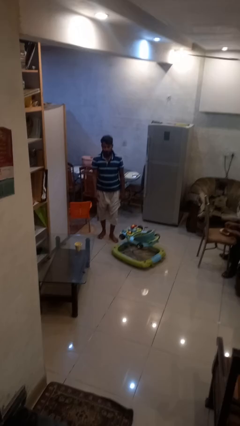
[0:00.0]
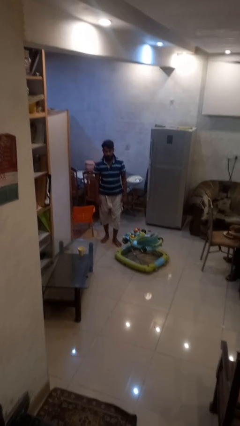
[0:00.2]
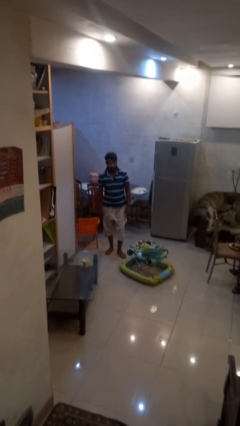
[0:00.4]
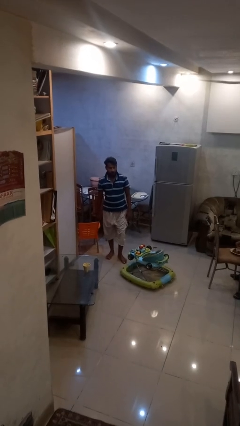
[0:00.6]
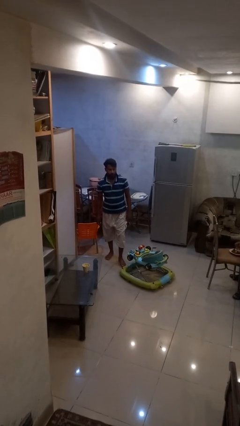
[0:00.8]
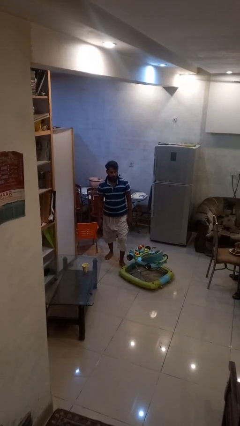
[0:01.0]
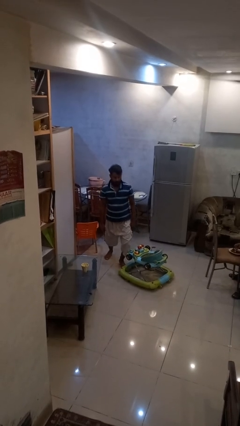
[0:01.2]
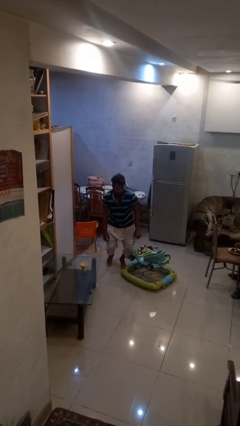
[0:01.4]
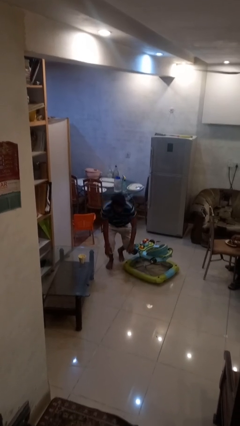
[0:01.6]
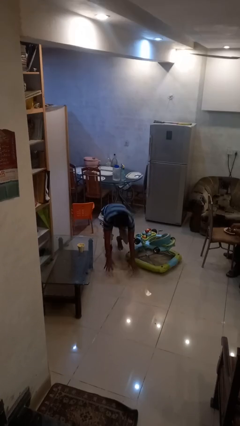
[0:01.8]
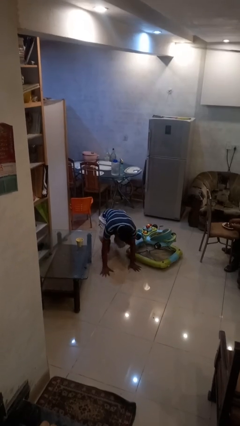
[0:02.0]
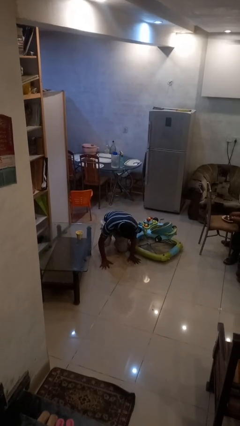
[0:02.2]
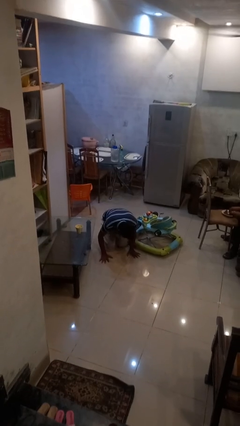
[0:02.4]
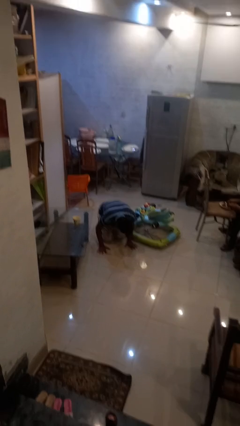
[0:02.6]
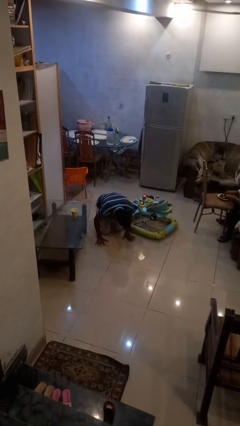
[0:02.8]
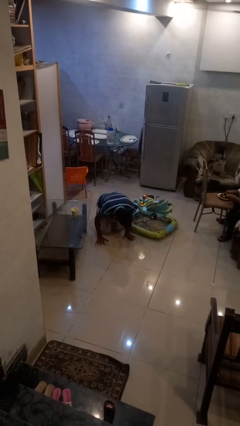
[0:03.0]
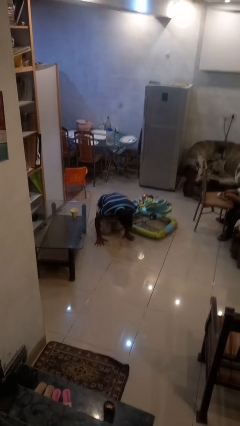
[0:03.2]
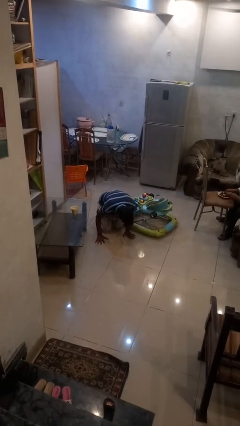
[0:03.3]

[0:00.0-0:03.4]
person trips on object on floor

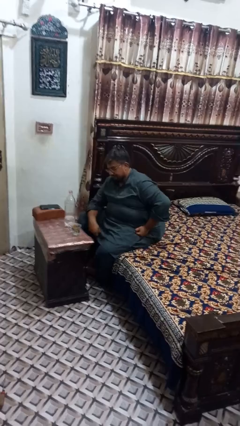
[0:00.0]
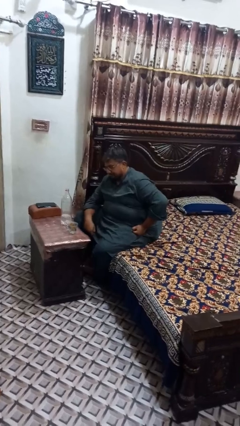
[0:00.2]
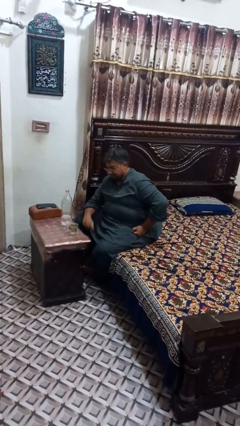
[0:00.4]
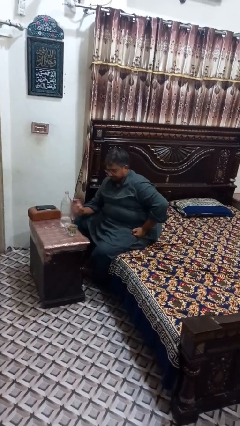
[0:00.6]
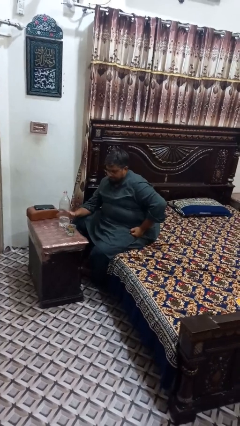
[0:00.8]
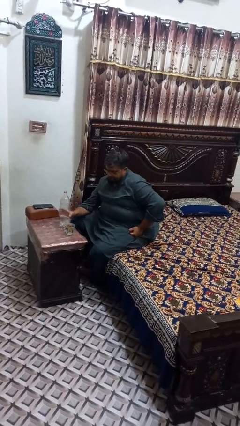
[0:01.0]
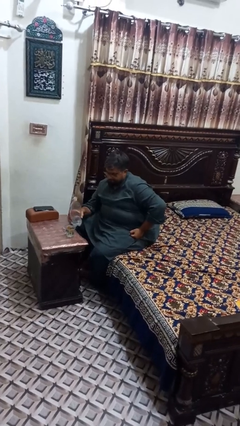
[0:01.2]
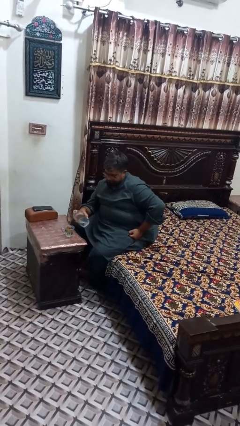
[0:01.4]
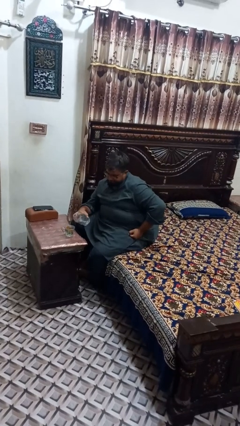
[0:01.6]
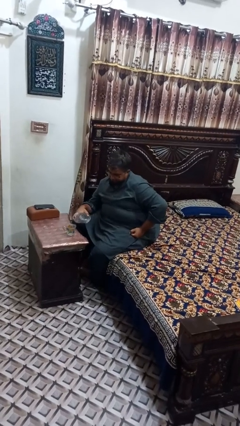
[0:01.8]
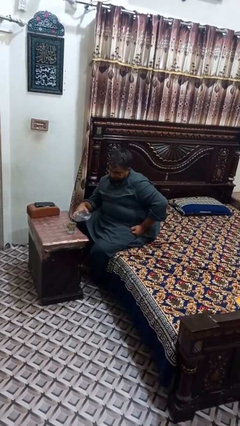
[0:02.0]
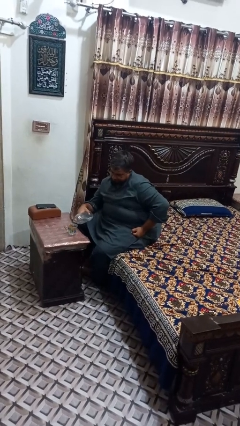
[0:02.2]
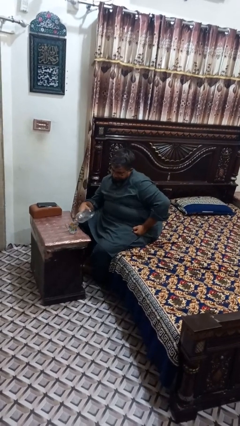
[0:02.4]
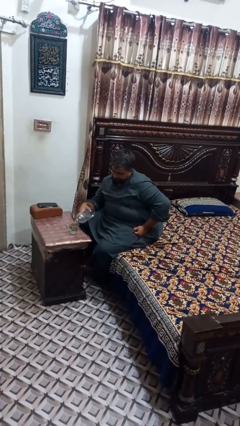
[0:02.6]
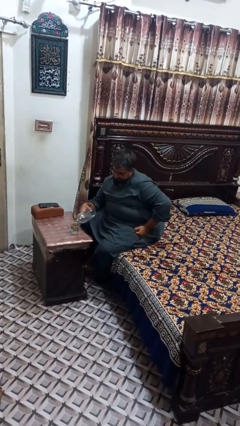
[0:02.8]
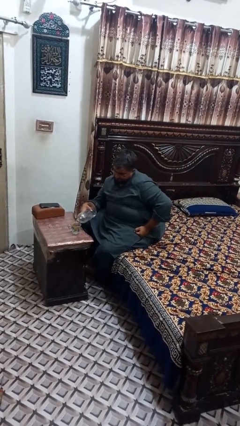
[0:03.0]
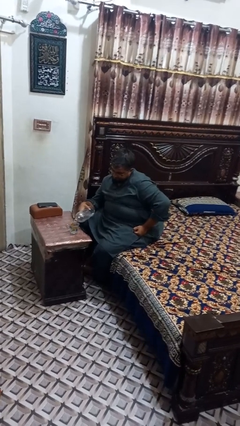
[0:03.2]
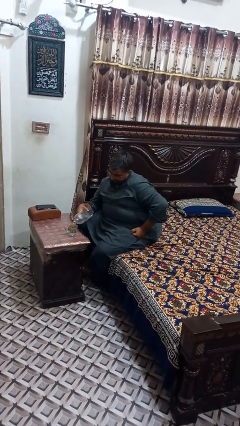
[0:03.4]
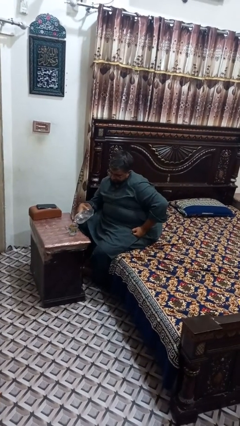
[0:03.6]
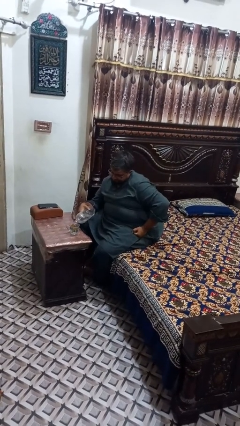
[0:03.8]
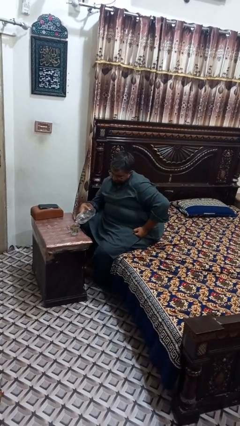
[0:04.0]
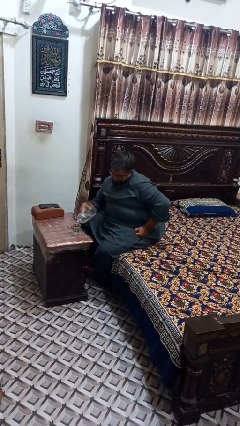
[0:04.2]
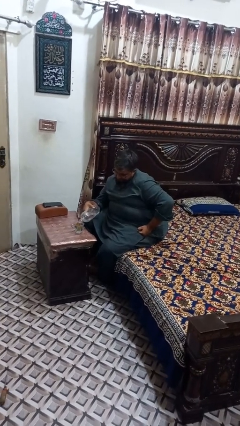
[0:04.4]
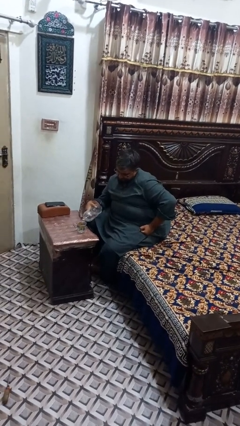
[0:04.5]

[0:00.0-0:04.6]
person pours liquid into cup

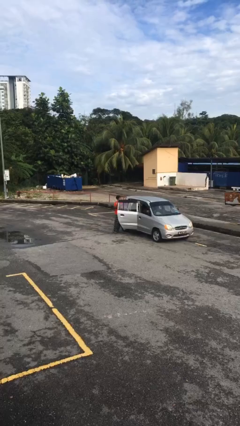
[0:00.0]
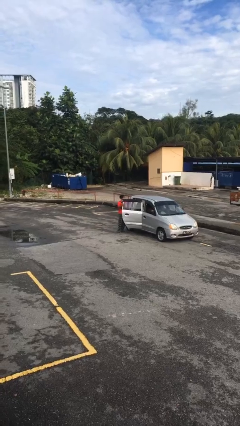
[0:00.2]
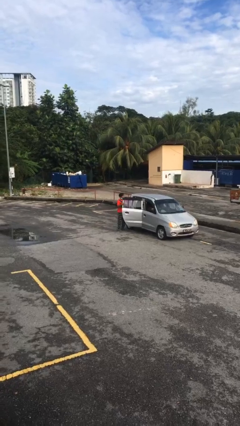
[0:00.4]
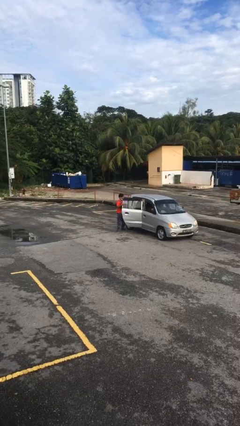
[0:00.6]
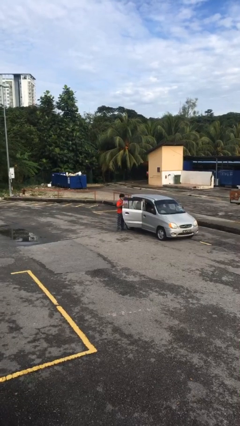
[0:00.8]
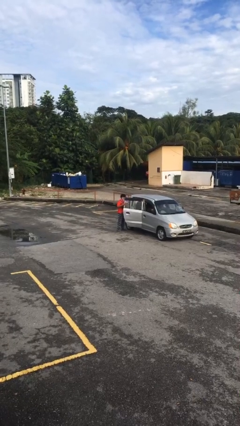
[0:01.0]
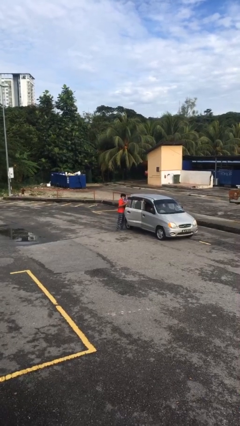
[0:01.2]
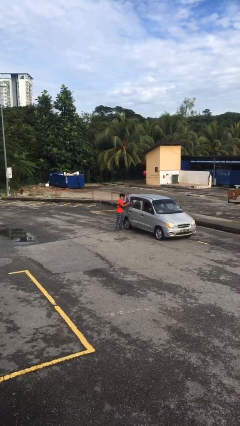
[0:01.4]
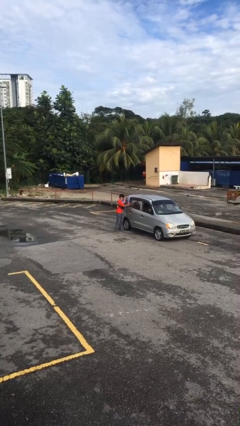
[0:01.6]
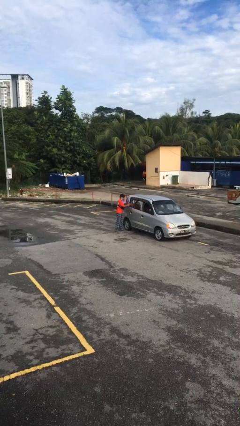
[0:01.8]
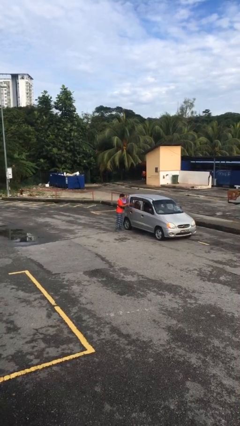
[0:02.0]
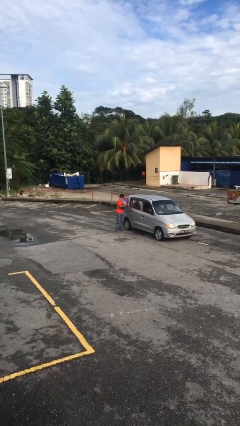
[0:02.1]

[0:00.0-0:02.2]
person closes car door

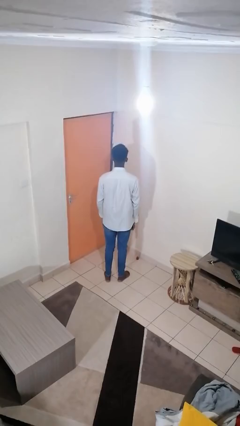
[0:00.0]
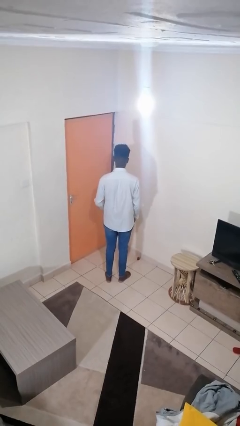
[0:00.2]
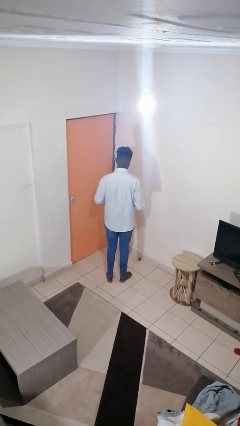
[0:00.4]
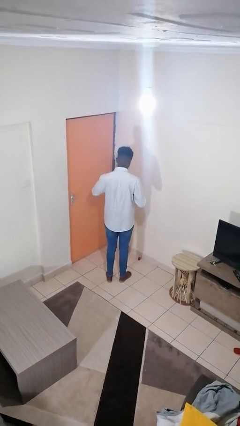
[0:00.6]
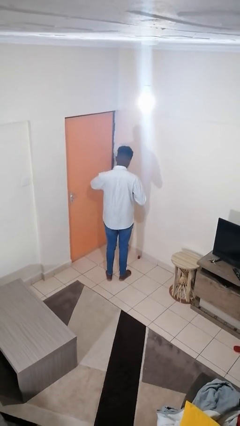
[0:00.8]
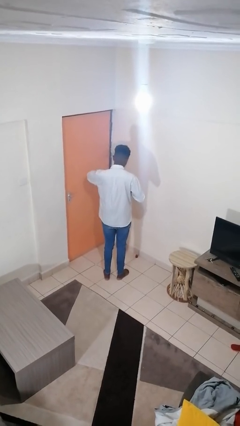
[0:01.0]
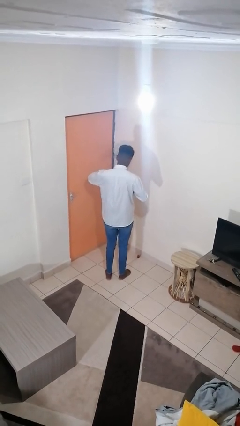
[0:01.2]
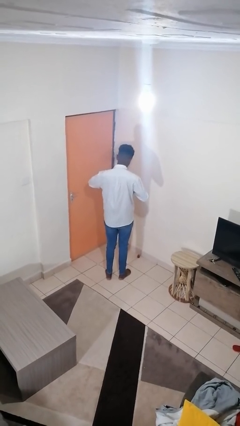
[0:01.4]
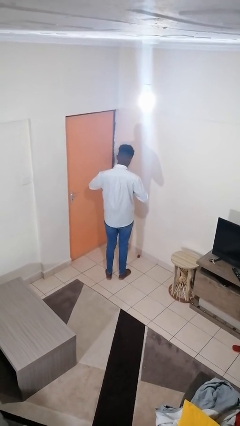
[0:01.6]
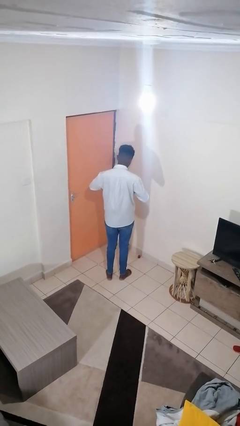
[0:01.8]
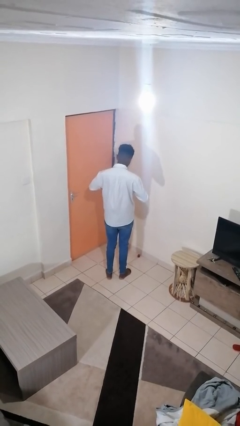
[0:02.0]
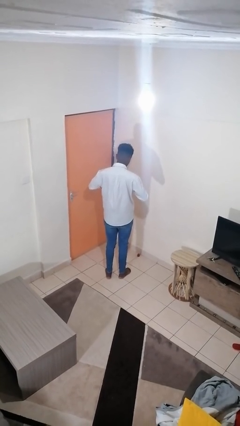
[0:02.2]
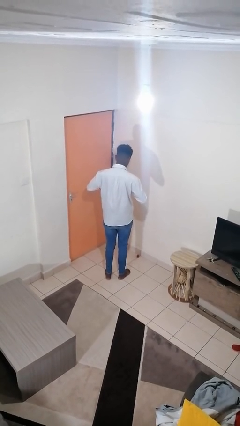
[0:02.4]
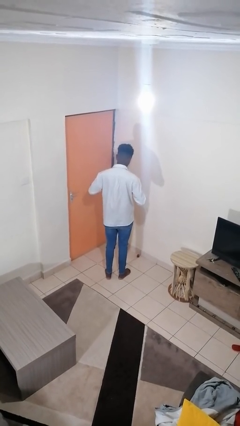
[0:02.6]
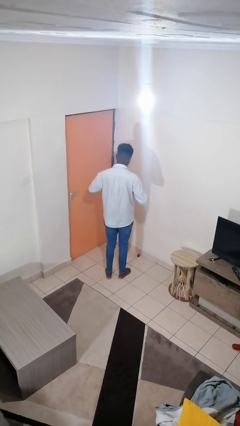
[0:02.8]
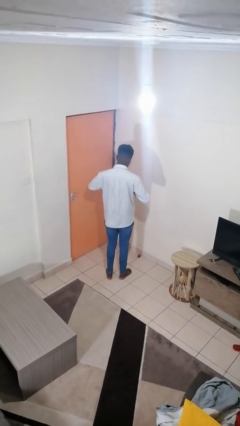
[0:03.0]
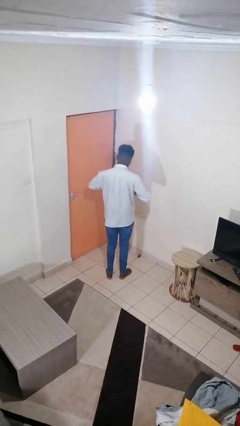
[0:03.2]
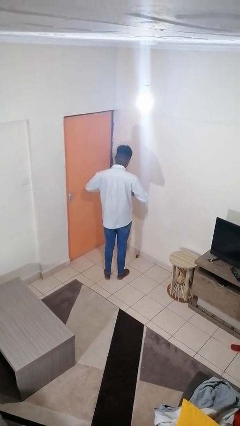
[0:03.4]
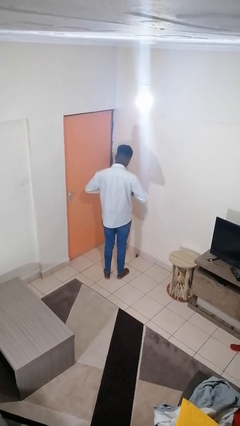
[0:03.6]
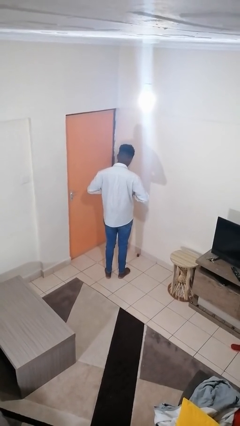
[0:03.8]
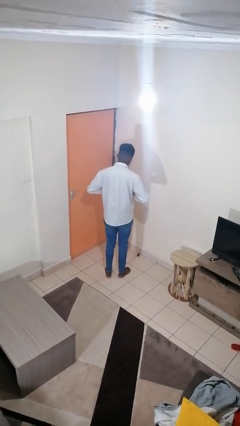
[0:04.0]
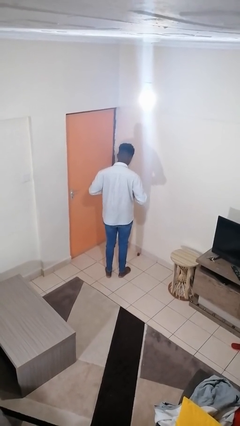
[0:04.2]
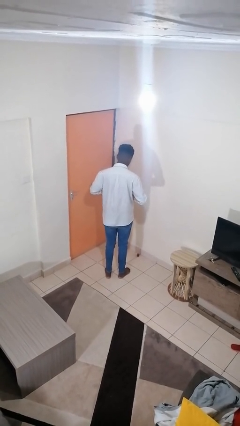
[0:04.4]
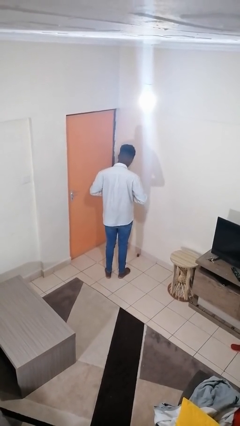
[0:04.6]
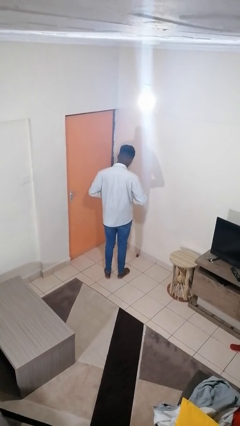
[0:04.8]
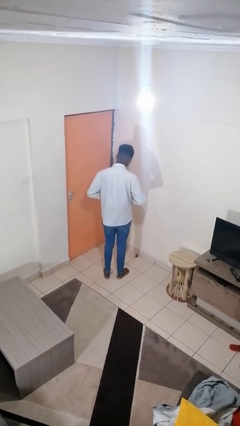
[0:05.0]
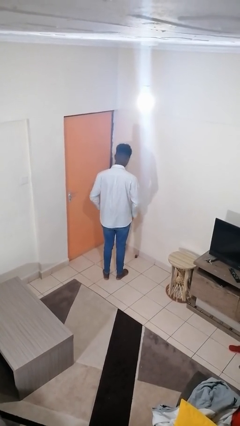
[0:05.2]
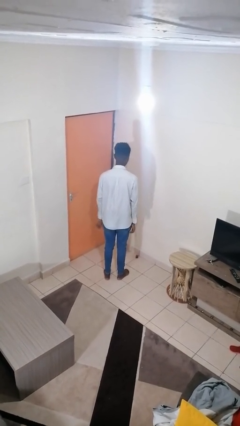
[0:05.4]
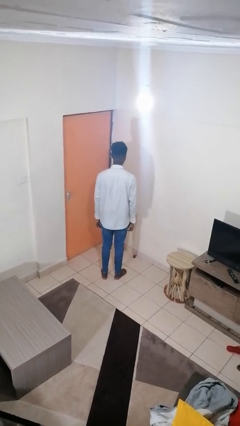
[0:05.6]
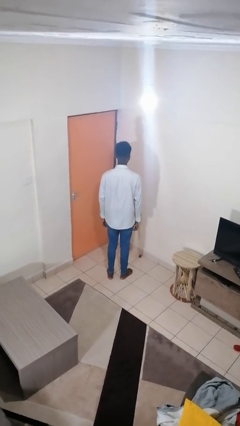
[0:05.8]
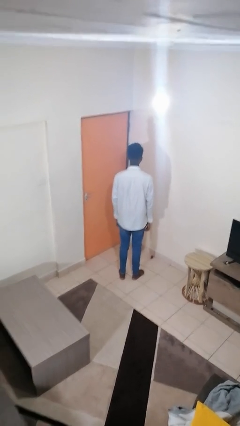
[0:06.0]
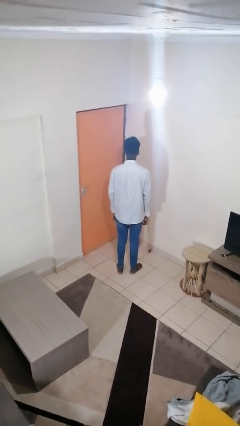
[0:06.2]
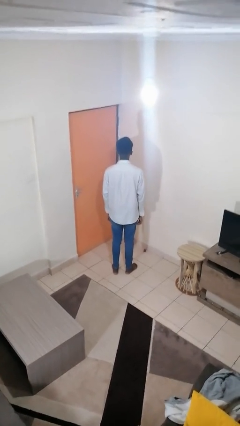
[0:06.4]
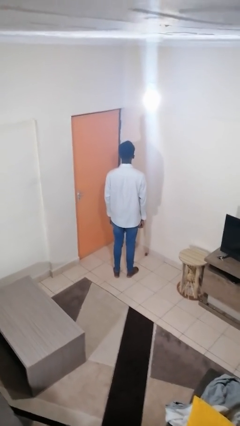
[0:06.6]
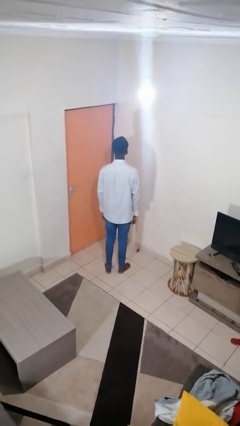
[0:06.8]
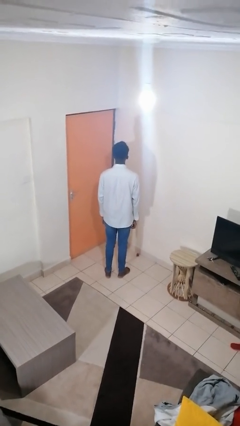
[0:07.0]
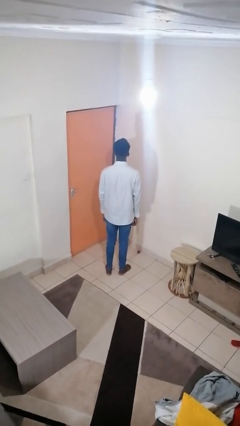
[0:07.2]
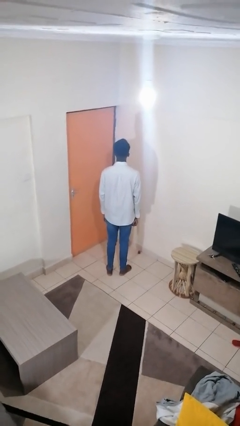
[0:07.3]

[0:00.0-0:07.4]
person unbuttons shirt

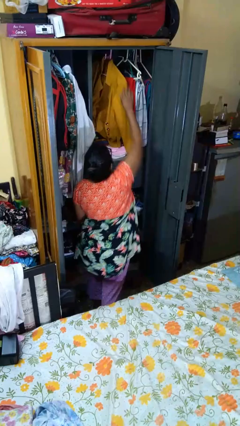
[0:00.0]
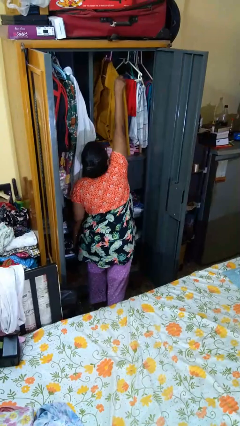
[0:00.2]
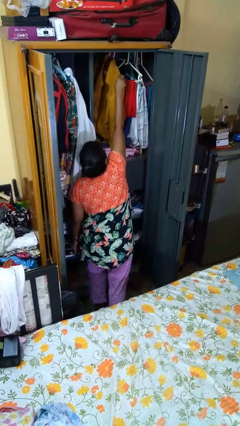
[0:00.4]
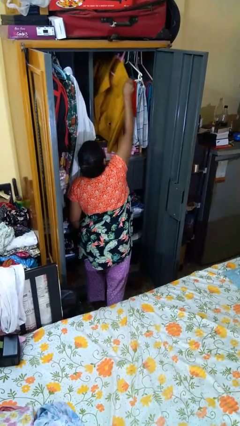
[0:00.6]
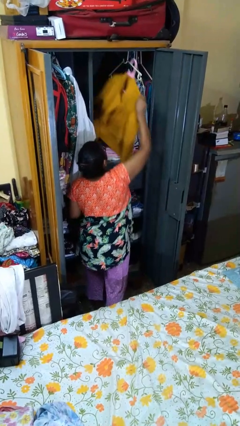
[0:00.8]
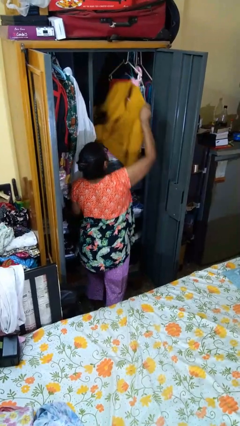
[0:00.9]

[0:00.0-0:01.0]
person takes clothes from closet
